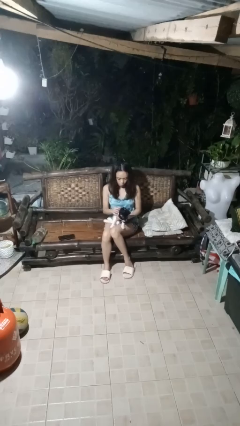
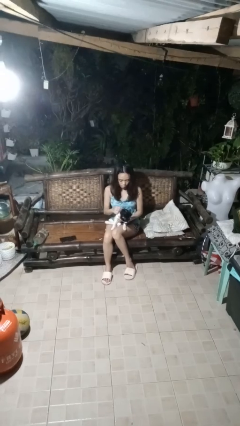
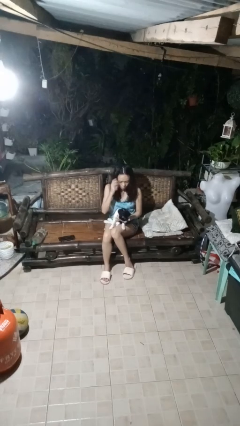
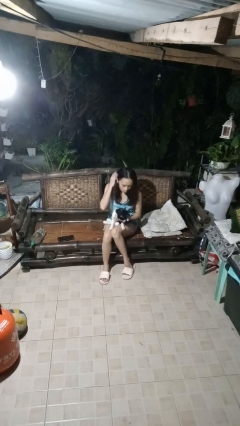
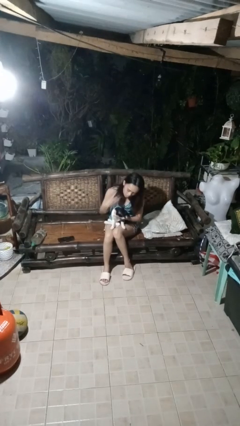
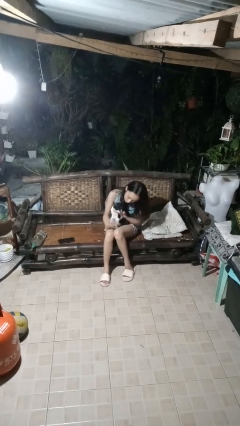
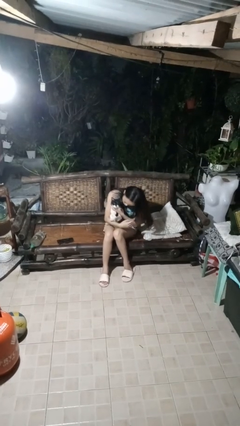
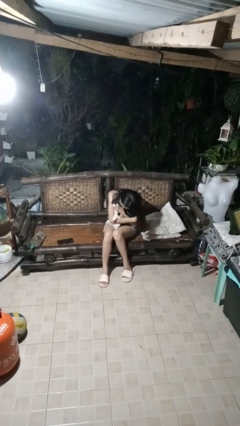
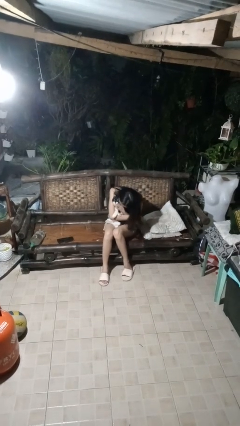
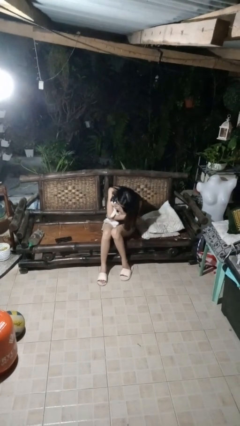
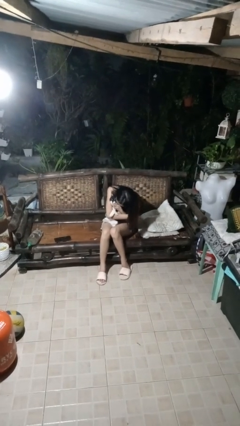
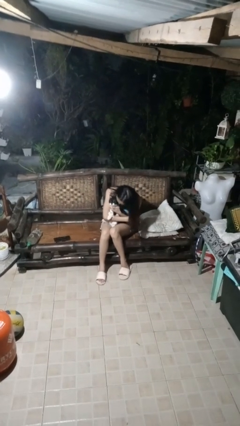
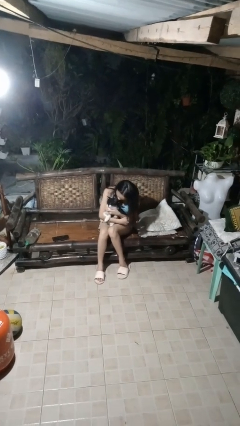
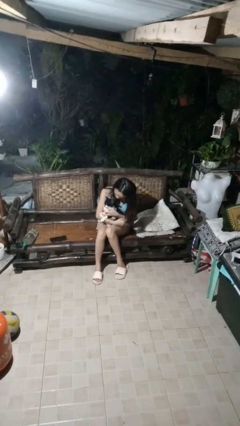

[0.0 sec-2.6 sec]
person hugs cat

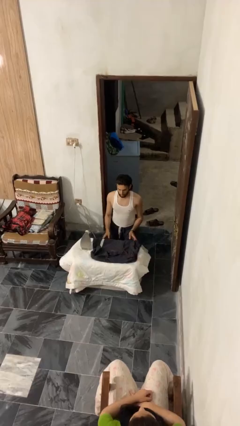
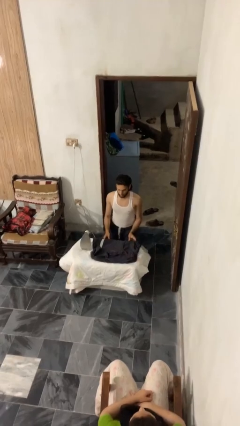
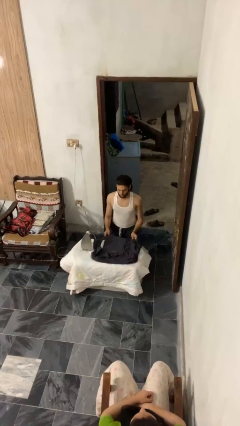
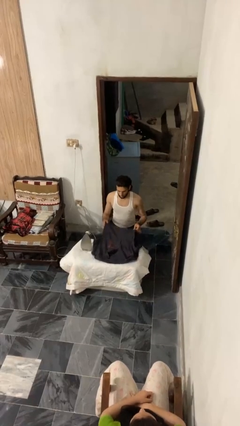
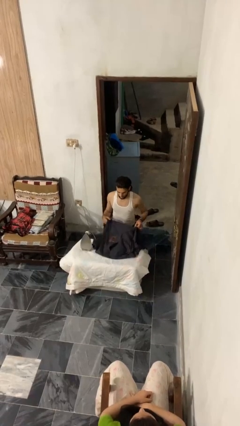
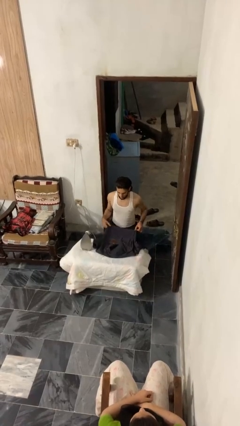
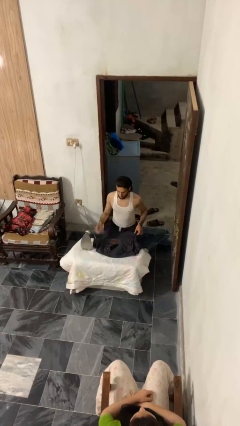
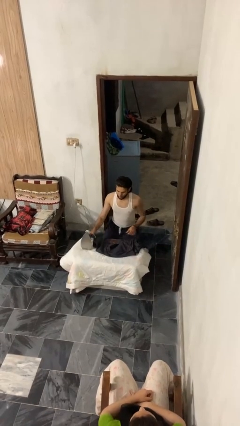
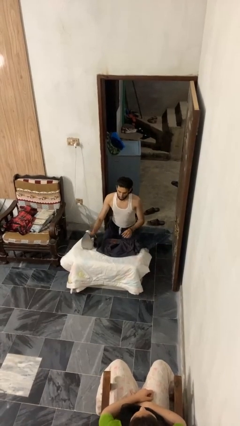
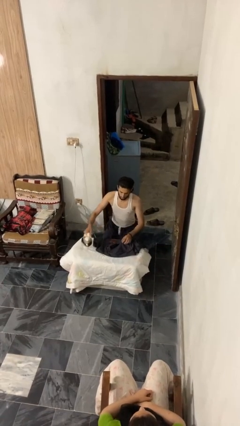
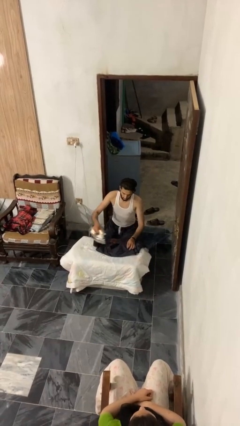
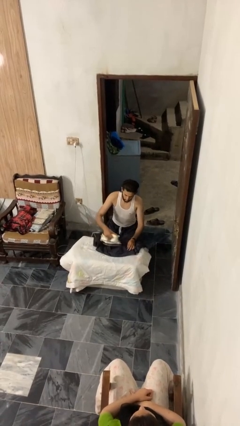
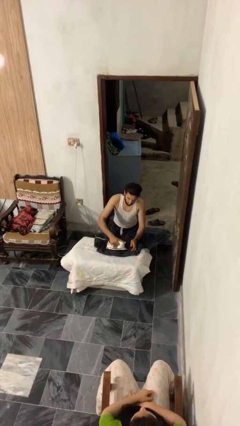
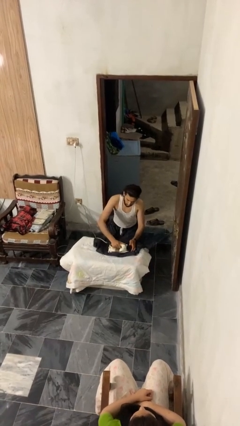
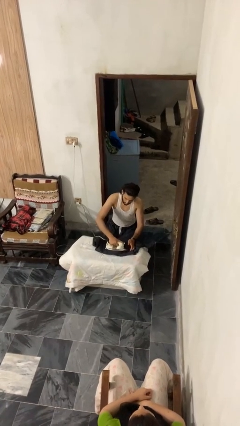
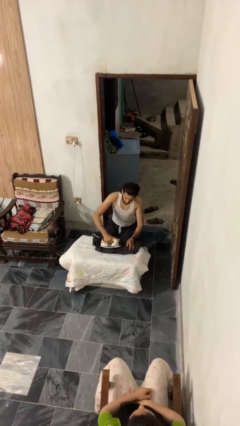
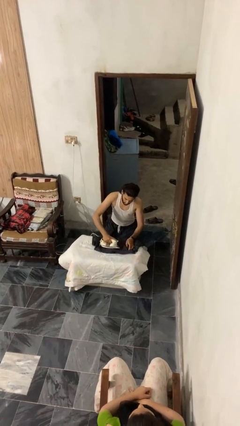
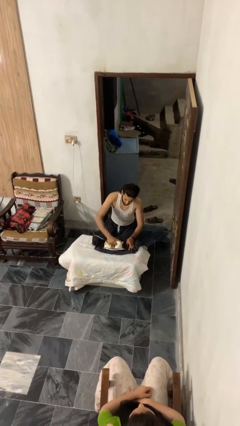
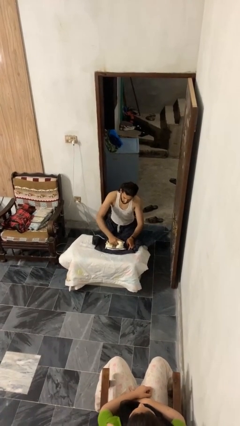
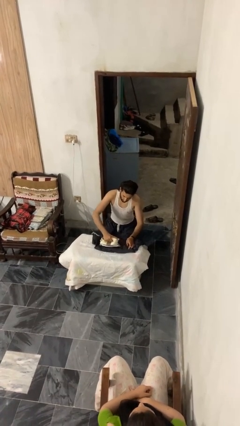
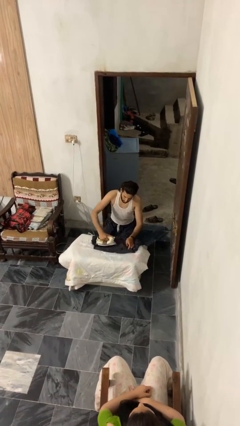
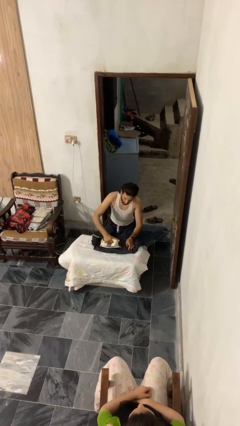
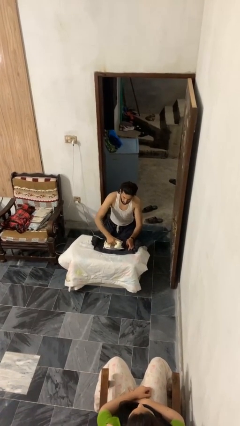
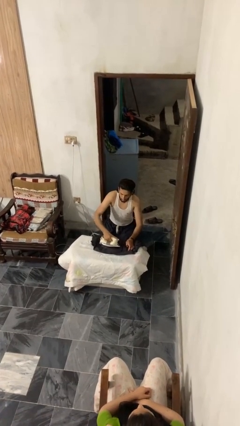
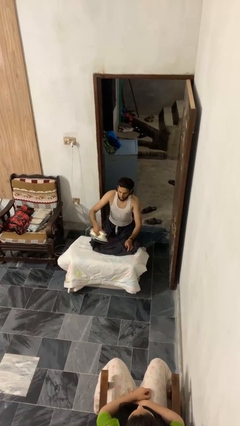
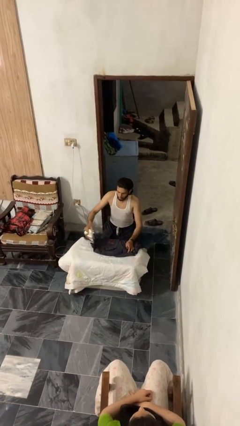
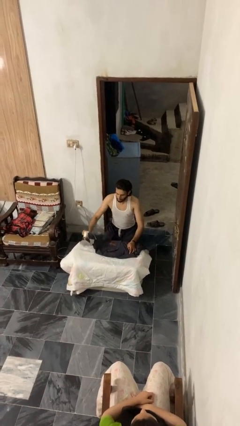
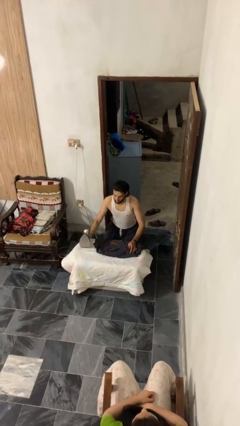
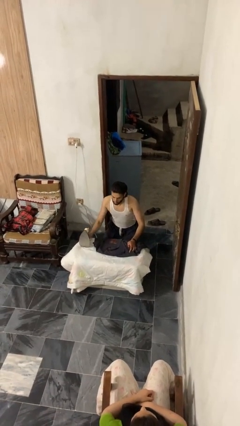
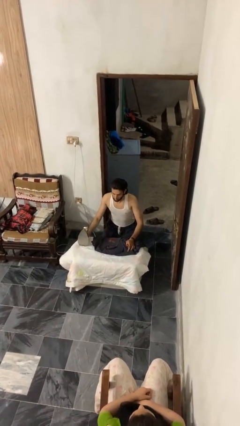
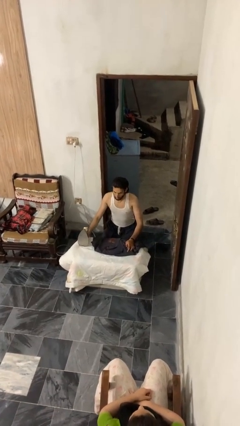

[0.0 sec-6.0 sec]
person irons clothes

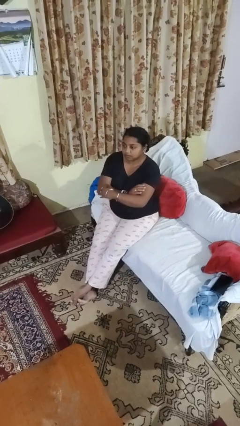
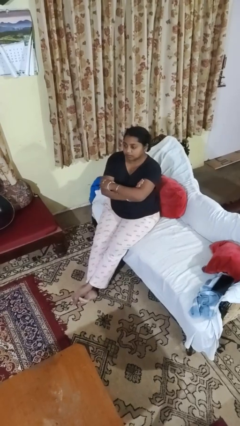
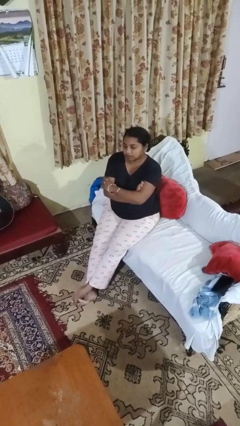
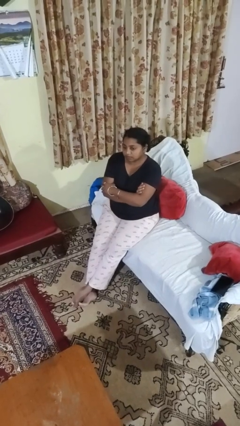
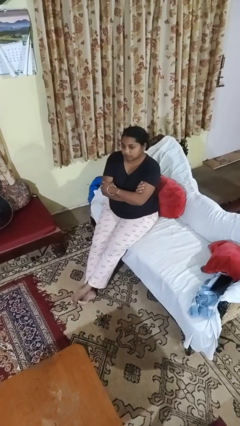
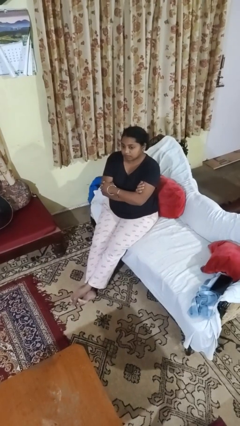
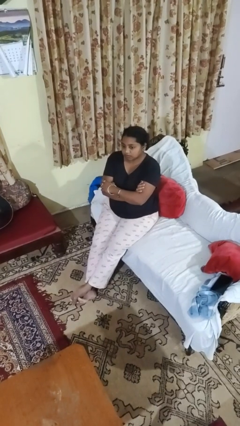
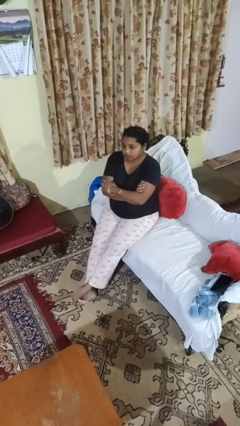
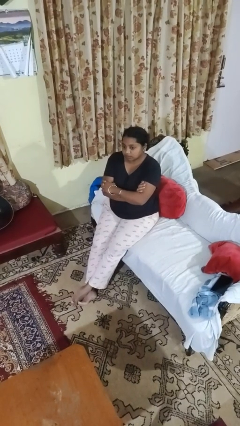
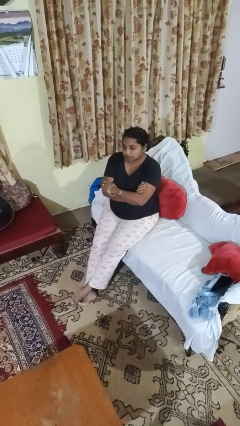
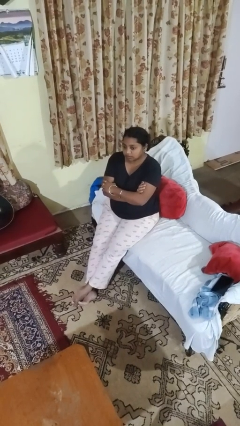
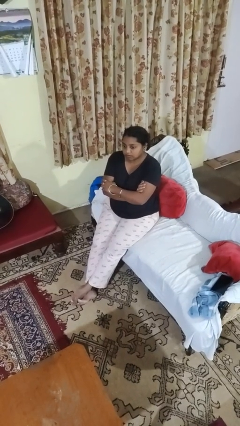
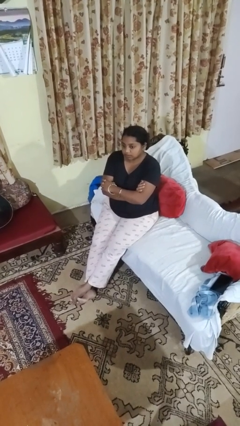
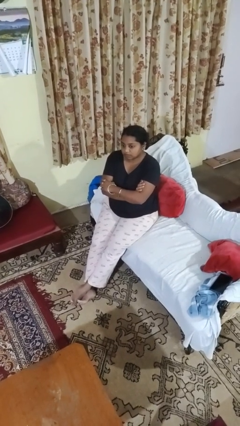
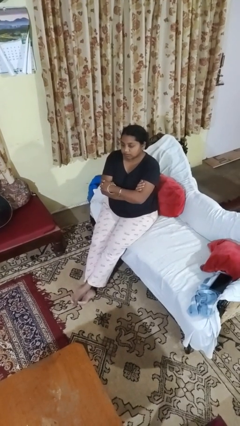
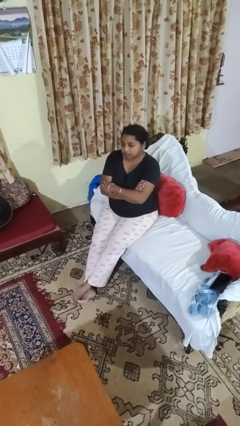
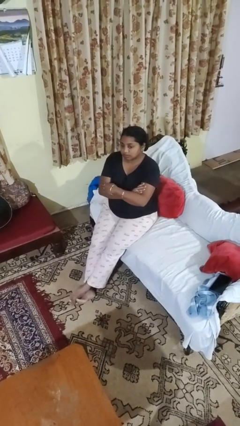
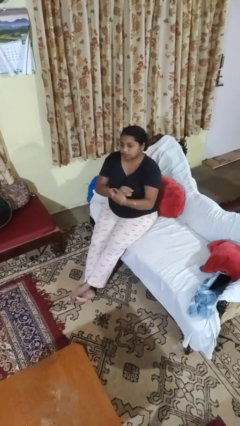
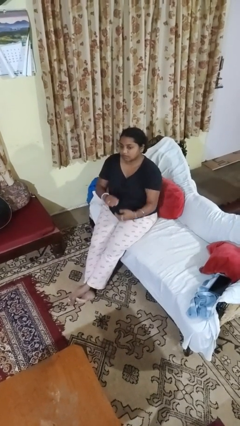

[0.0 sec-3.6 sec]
person crosses arms

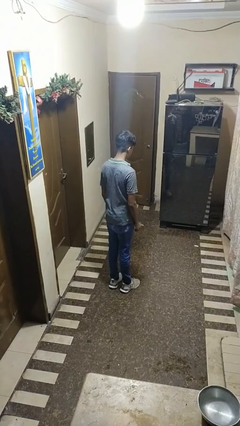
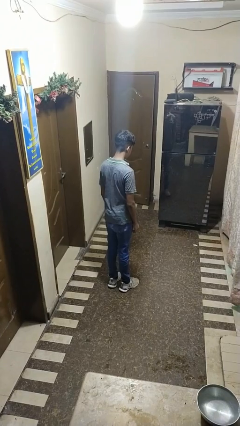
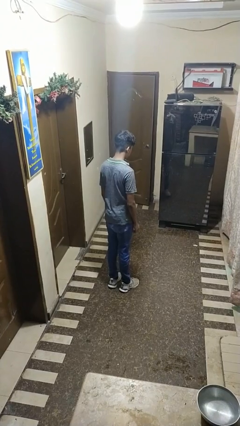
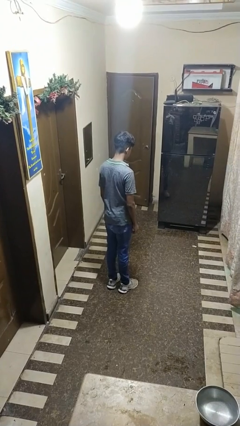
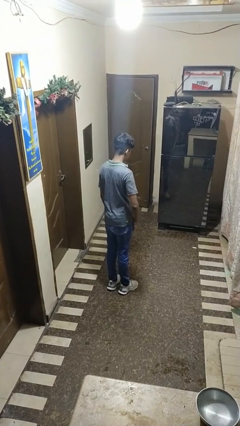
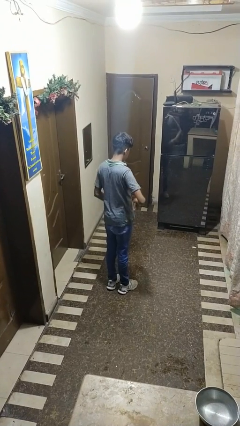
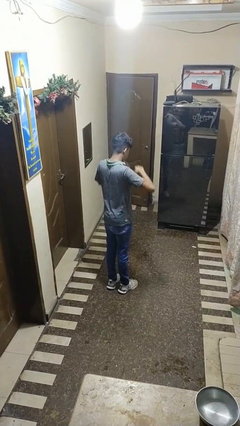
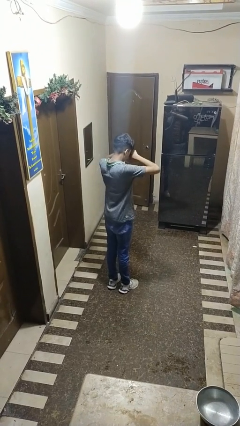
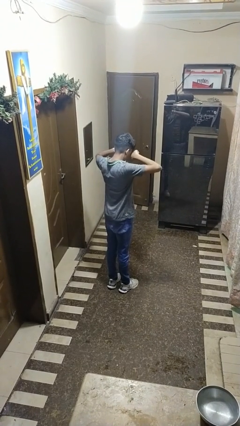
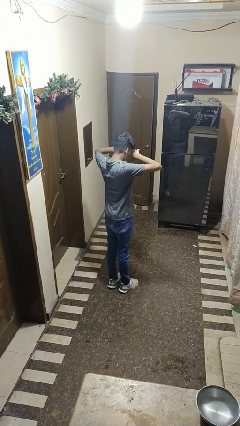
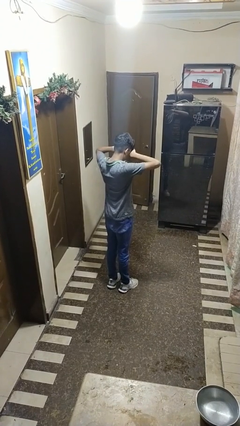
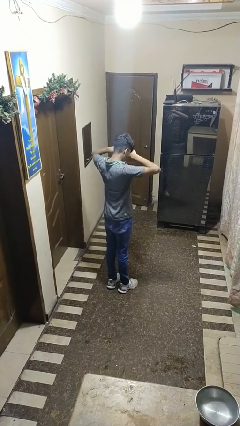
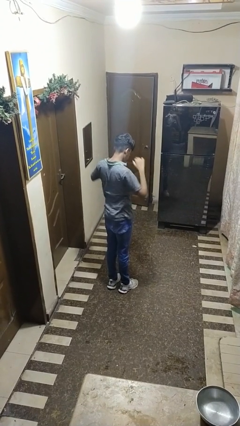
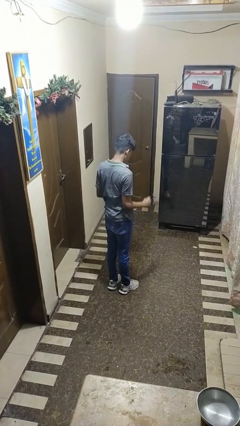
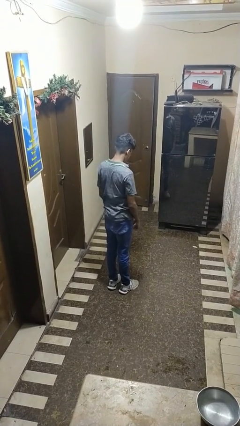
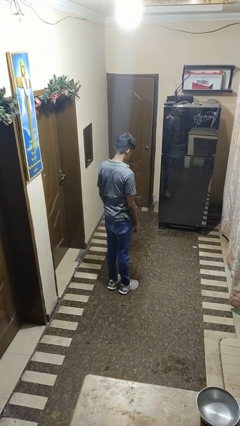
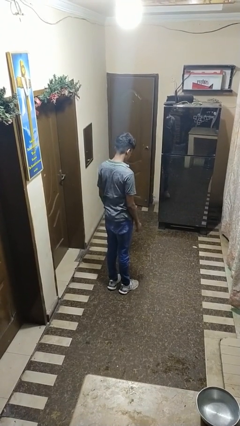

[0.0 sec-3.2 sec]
person rubs eyes

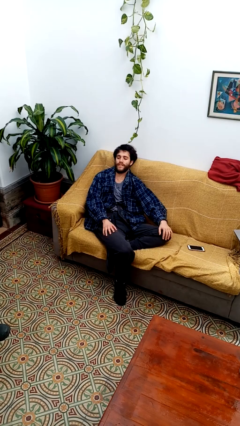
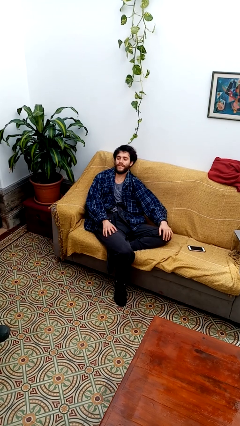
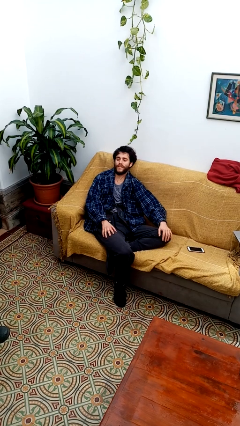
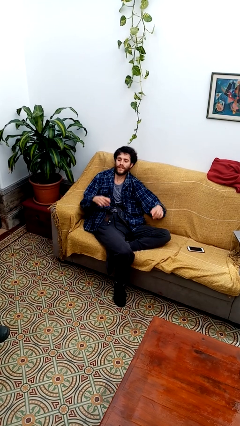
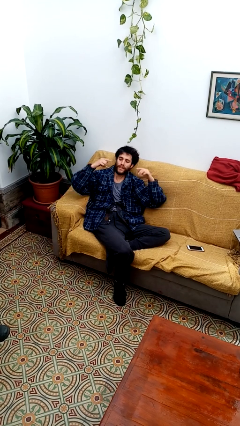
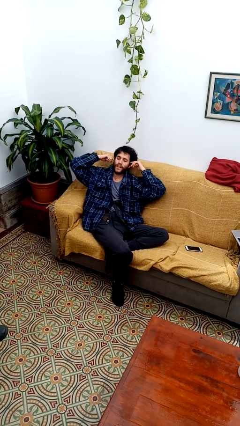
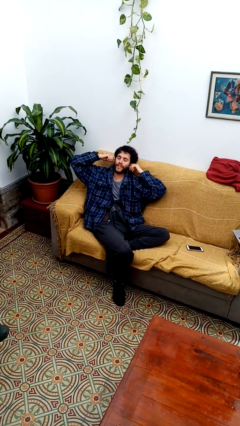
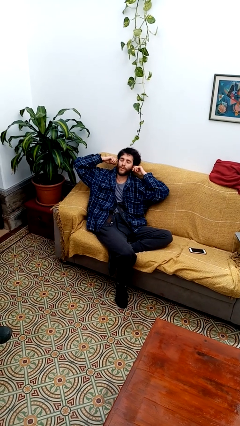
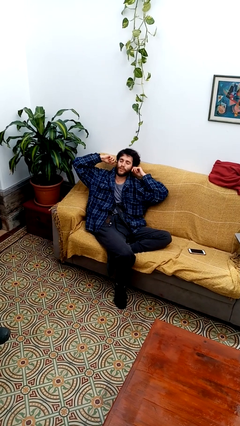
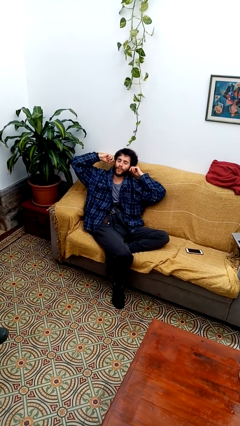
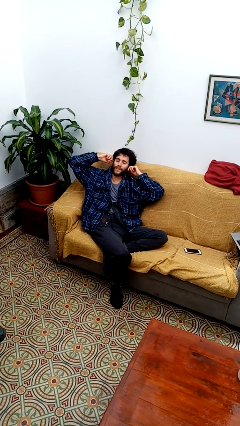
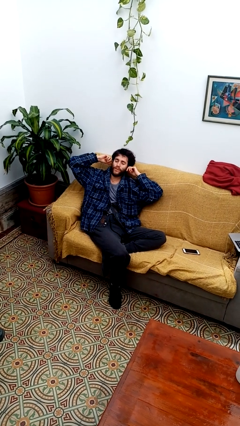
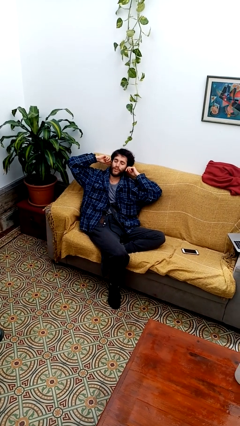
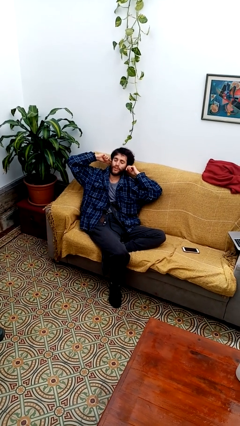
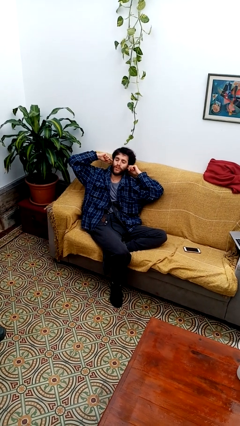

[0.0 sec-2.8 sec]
person puts fingers in ear
